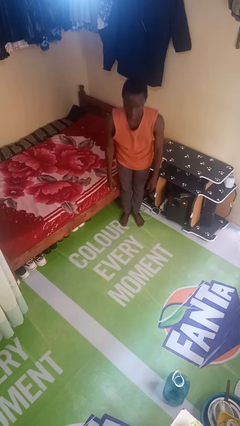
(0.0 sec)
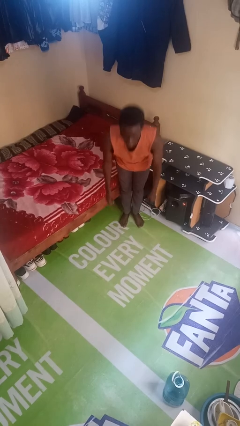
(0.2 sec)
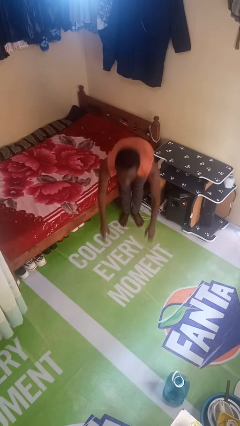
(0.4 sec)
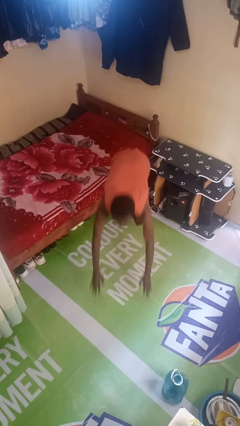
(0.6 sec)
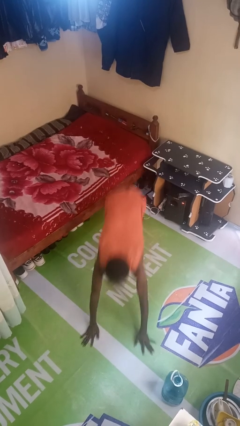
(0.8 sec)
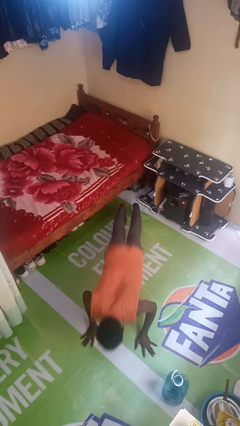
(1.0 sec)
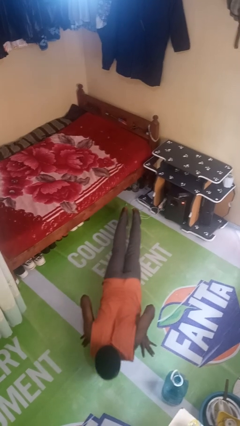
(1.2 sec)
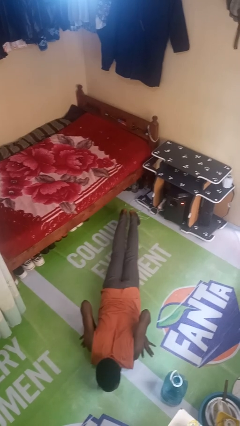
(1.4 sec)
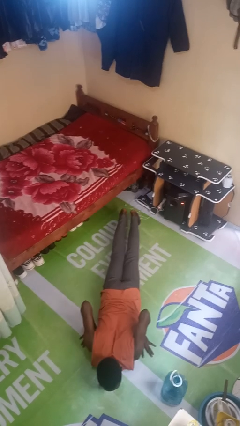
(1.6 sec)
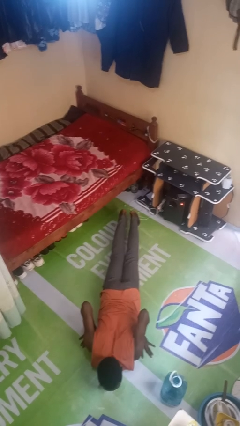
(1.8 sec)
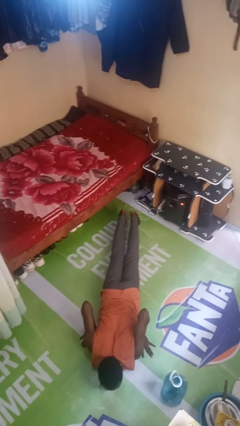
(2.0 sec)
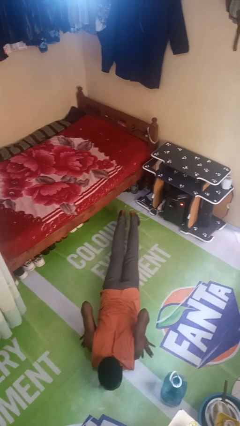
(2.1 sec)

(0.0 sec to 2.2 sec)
person falls while standing

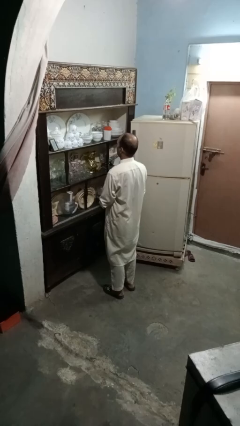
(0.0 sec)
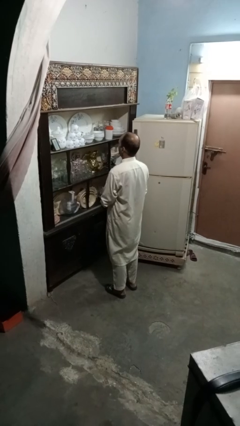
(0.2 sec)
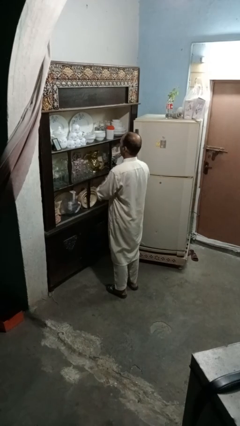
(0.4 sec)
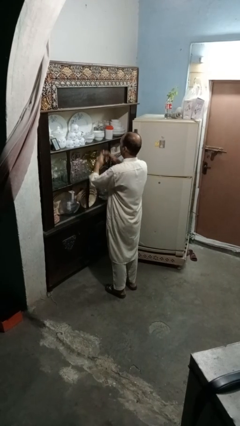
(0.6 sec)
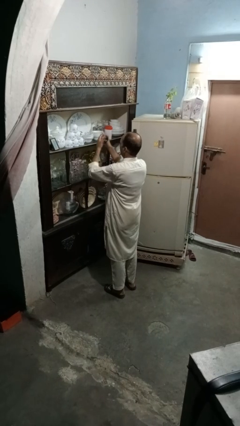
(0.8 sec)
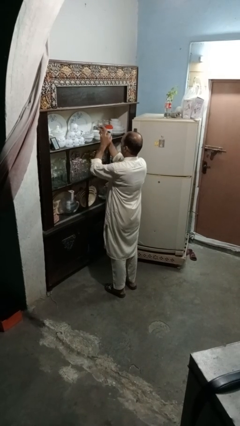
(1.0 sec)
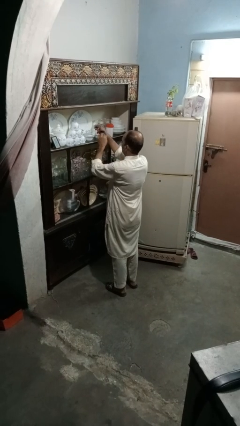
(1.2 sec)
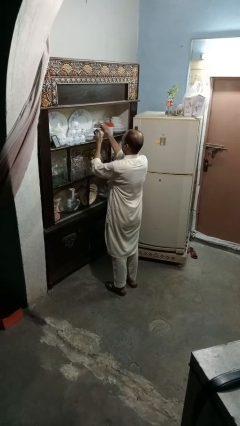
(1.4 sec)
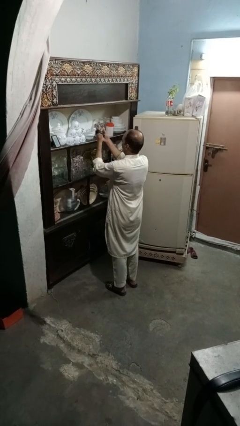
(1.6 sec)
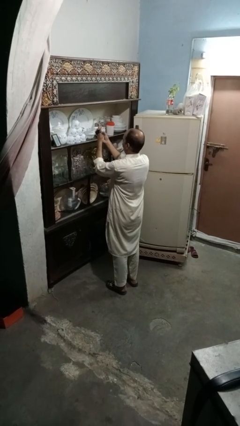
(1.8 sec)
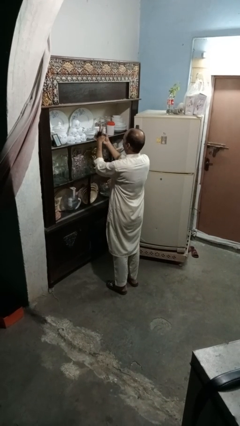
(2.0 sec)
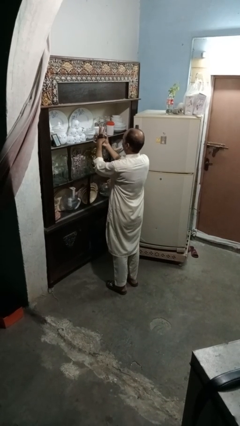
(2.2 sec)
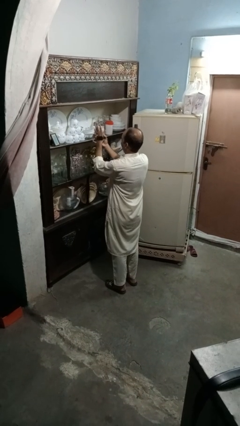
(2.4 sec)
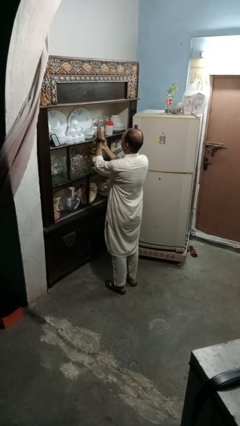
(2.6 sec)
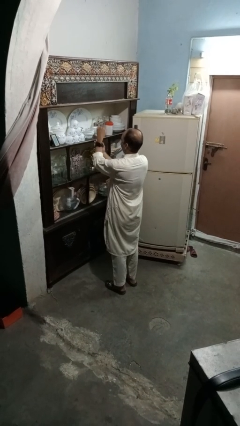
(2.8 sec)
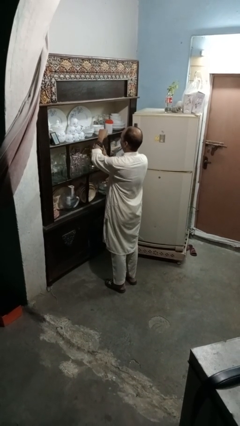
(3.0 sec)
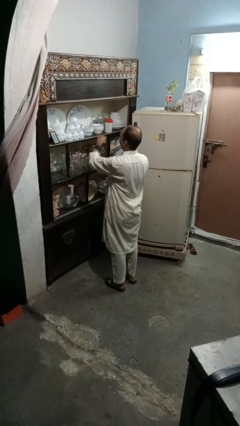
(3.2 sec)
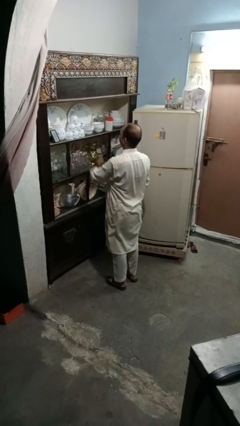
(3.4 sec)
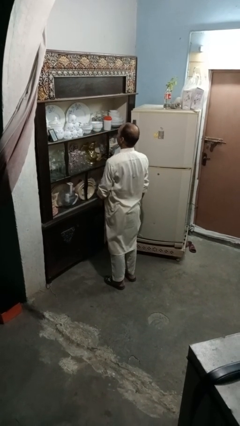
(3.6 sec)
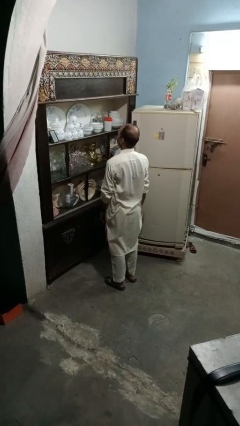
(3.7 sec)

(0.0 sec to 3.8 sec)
person puts on wristwatch

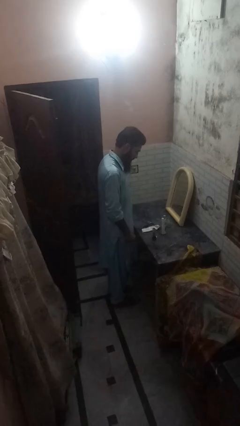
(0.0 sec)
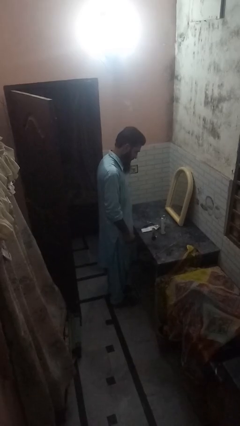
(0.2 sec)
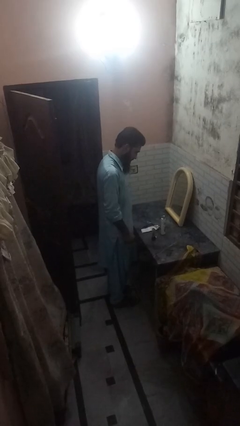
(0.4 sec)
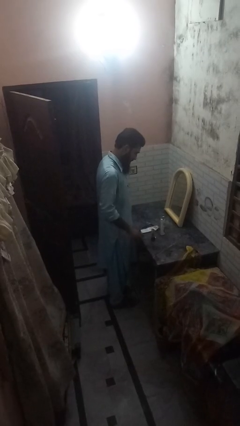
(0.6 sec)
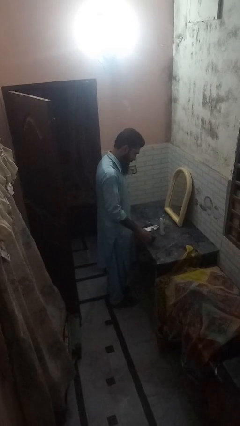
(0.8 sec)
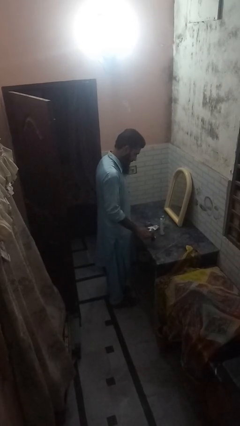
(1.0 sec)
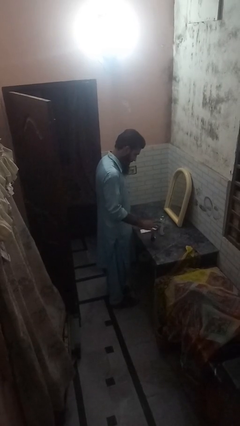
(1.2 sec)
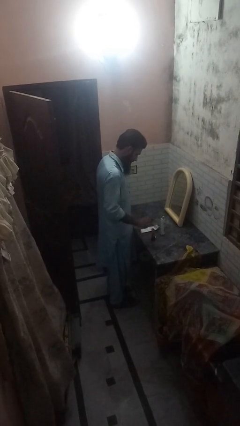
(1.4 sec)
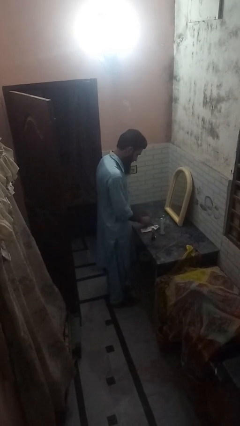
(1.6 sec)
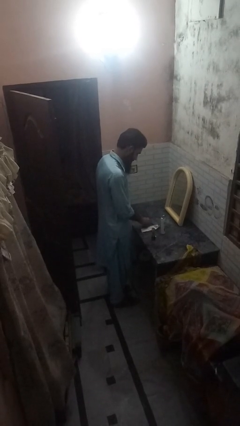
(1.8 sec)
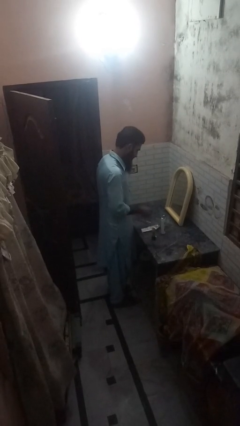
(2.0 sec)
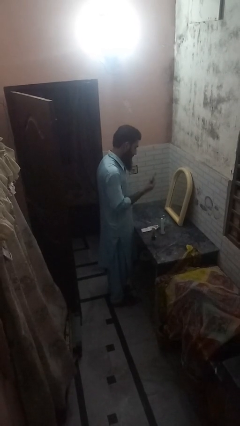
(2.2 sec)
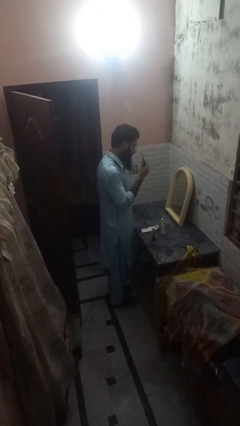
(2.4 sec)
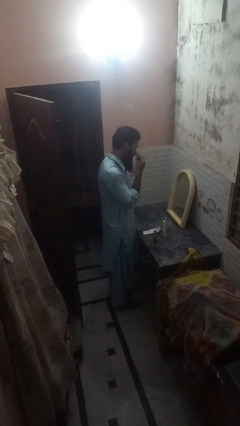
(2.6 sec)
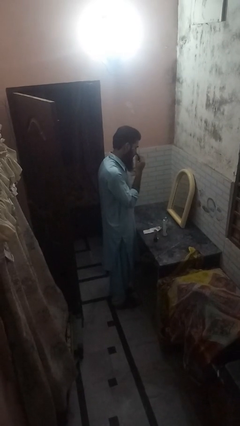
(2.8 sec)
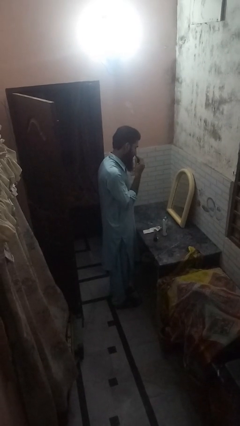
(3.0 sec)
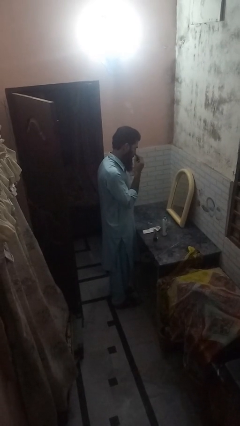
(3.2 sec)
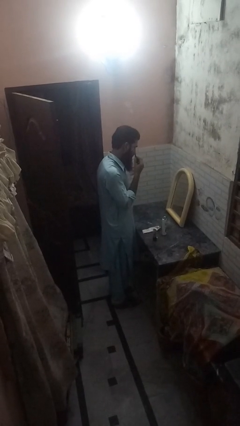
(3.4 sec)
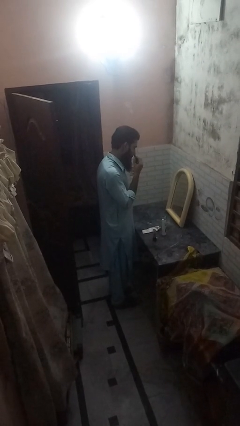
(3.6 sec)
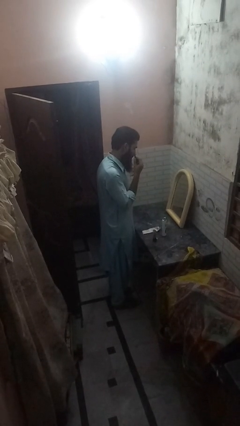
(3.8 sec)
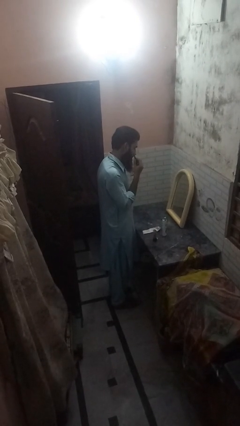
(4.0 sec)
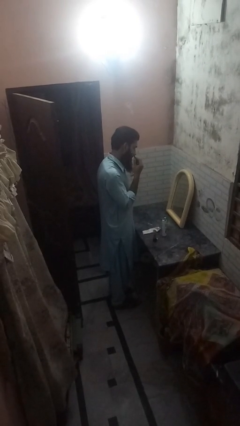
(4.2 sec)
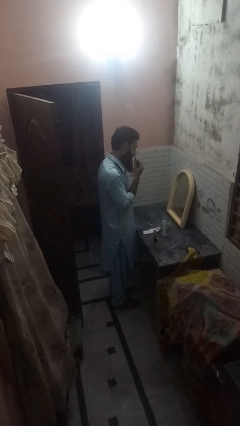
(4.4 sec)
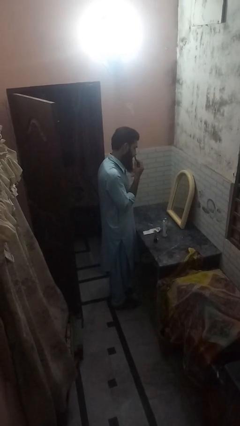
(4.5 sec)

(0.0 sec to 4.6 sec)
person shaves face

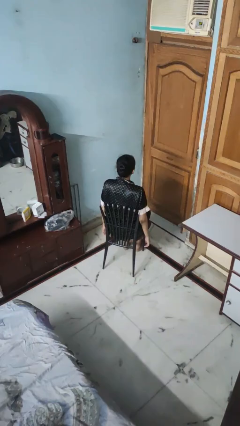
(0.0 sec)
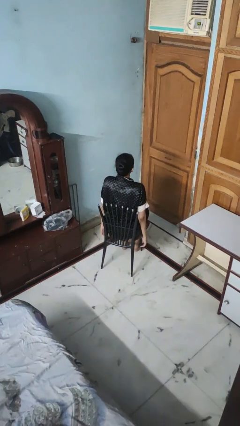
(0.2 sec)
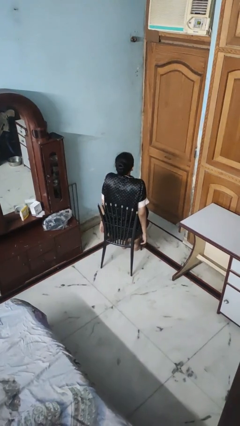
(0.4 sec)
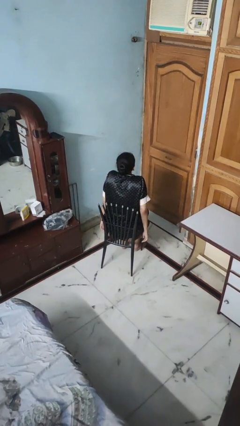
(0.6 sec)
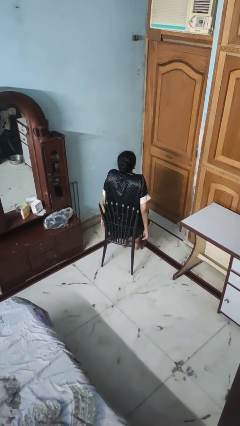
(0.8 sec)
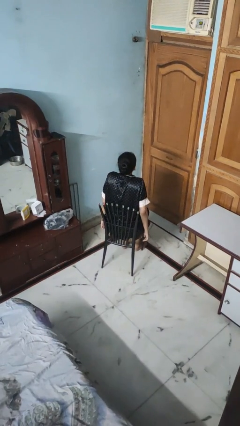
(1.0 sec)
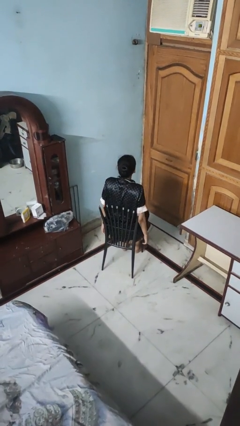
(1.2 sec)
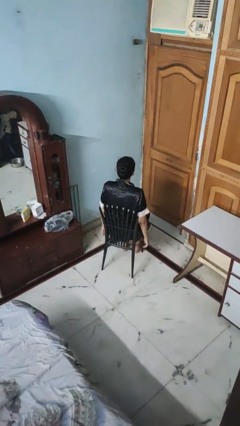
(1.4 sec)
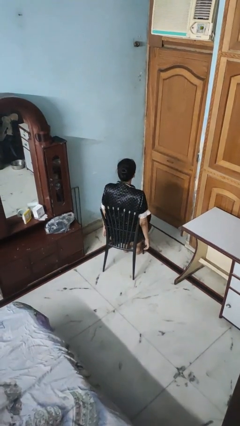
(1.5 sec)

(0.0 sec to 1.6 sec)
person shrugs

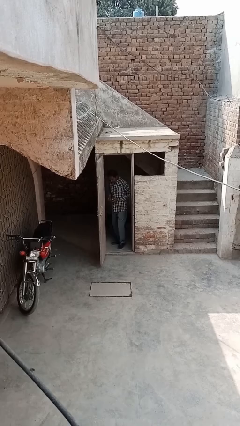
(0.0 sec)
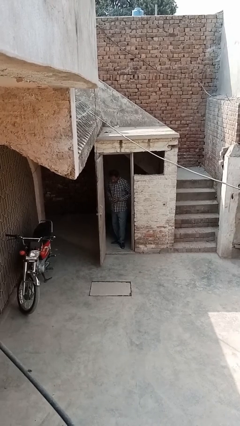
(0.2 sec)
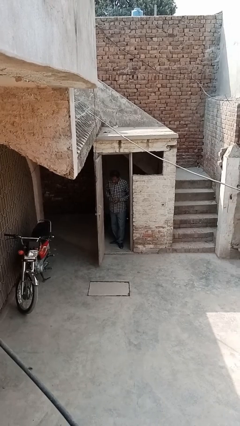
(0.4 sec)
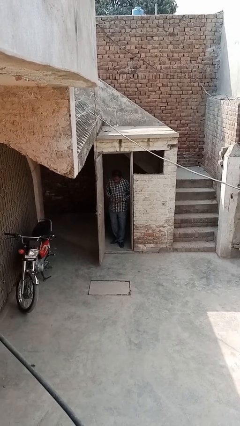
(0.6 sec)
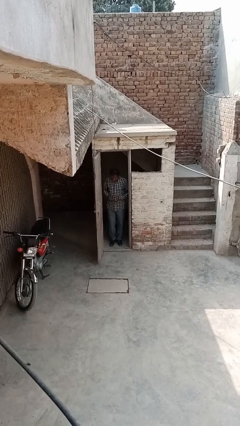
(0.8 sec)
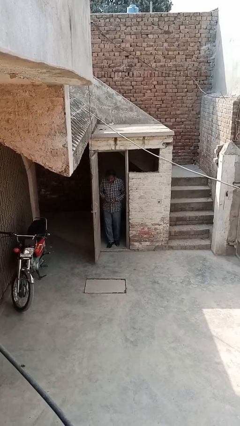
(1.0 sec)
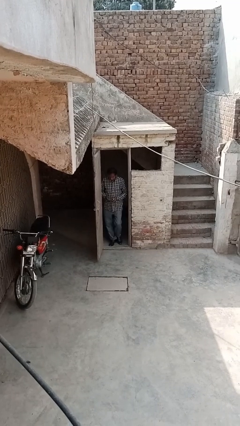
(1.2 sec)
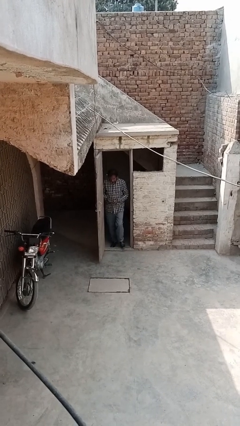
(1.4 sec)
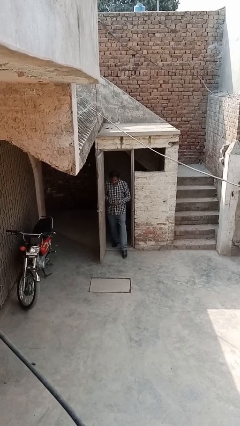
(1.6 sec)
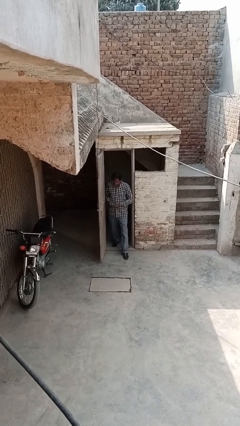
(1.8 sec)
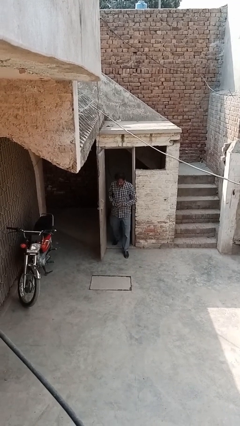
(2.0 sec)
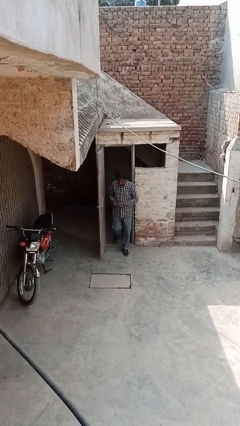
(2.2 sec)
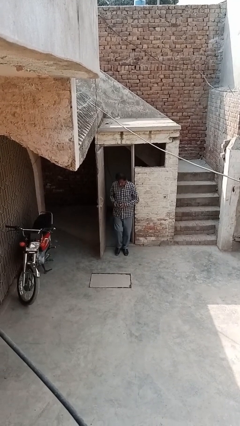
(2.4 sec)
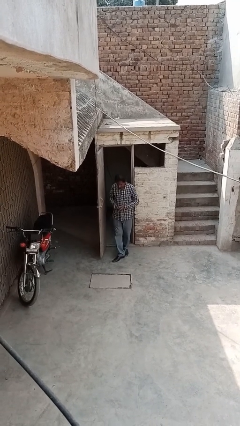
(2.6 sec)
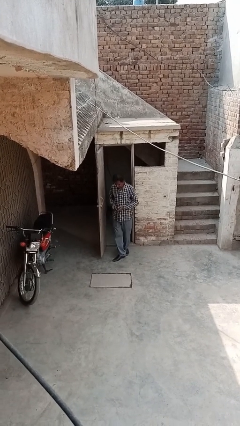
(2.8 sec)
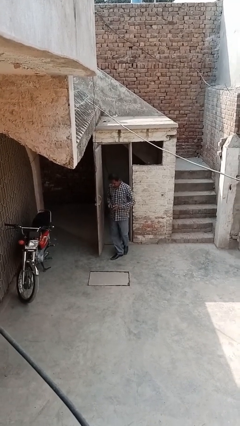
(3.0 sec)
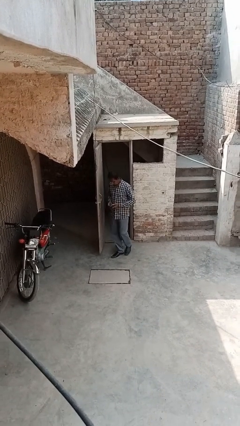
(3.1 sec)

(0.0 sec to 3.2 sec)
person enters scene through structure

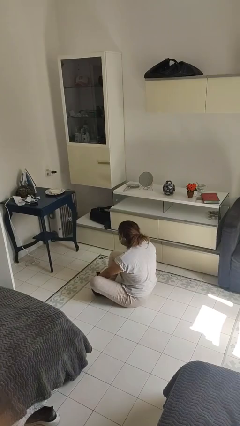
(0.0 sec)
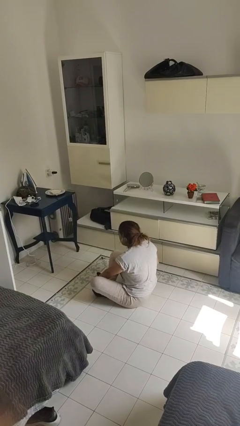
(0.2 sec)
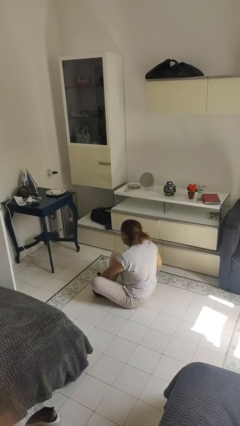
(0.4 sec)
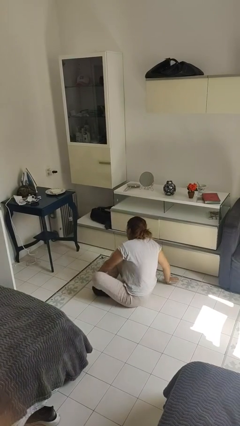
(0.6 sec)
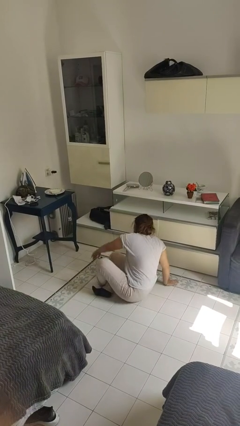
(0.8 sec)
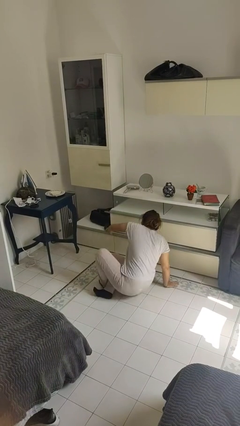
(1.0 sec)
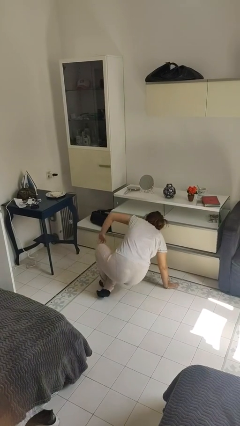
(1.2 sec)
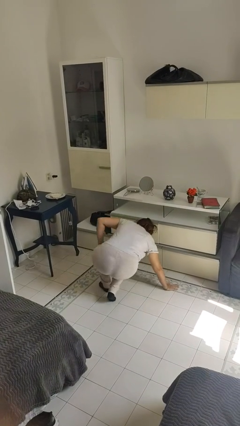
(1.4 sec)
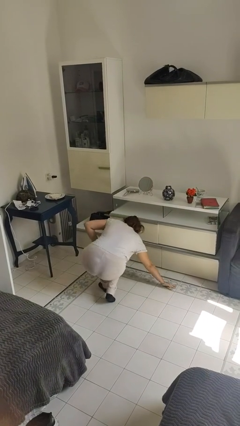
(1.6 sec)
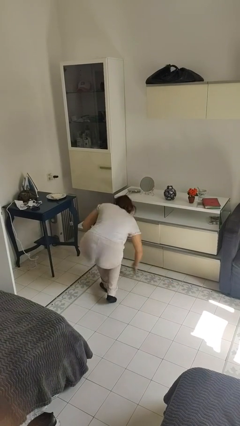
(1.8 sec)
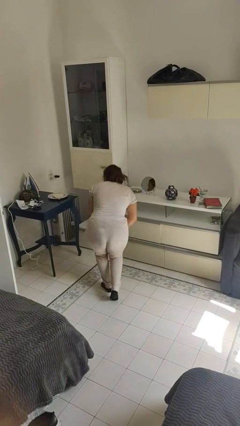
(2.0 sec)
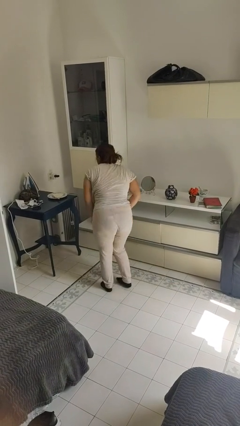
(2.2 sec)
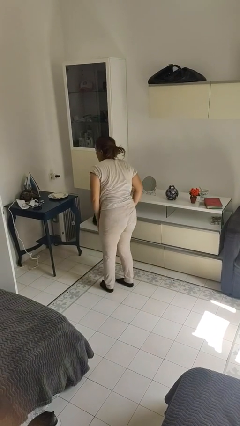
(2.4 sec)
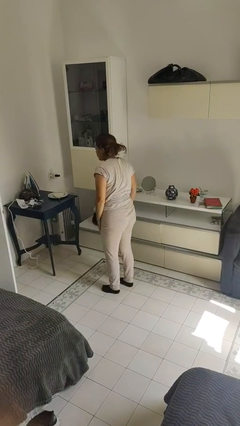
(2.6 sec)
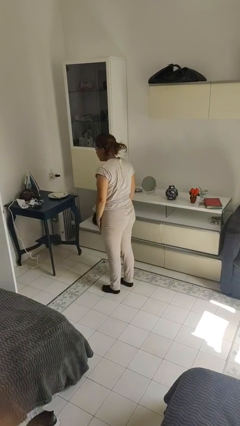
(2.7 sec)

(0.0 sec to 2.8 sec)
person stands up from floor
